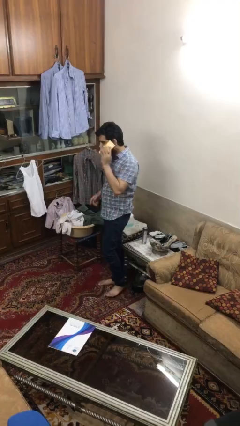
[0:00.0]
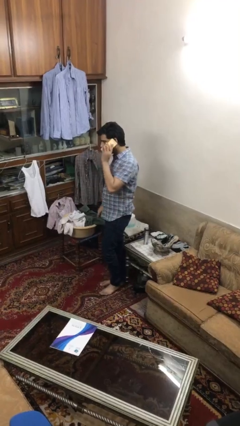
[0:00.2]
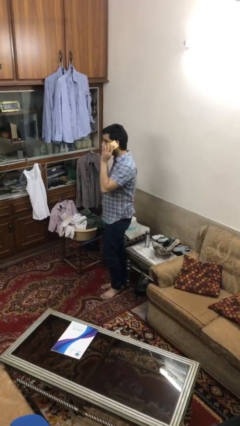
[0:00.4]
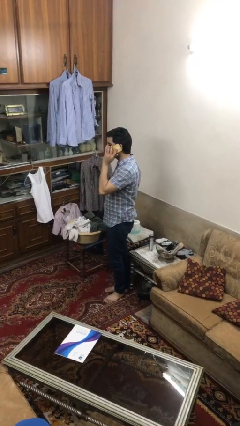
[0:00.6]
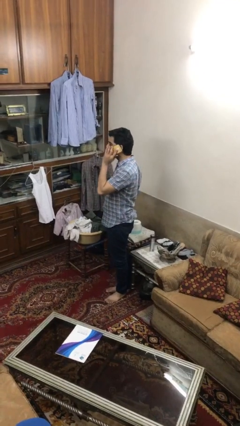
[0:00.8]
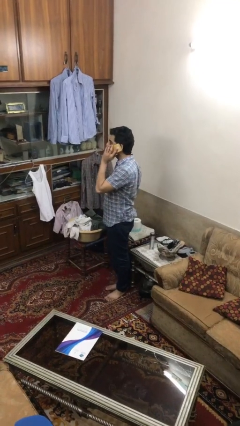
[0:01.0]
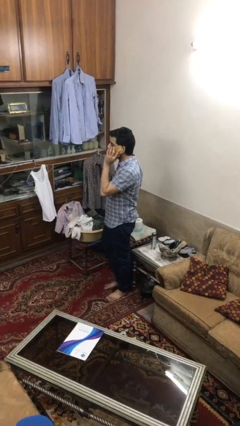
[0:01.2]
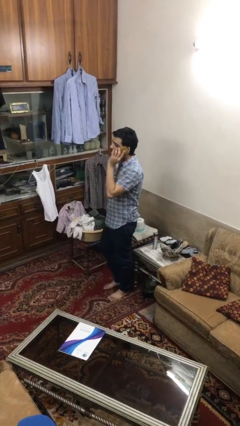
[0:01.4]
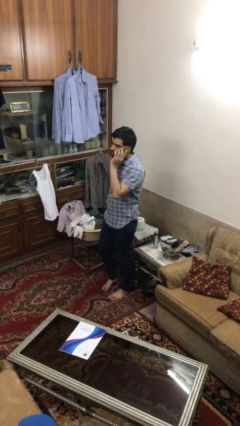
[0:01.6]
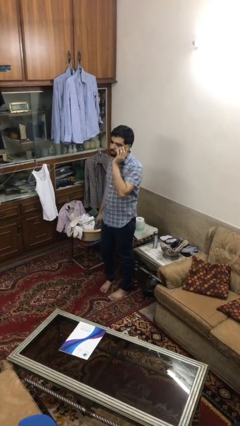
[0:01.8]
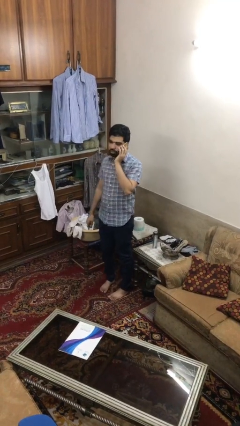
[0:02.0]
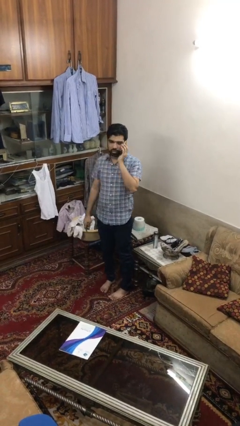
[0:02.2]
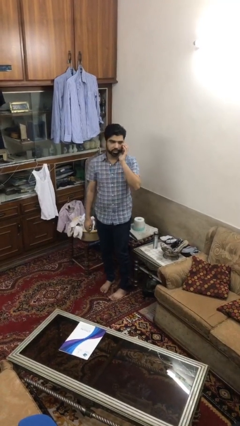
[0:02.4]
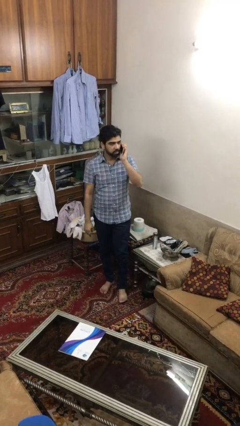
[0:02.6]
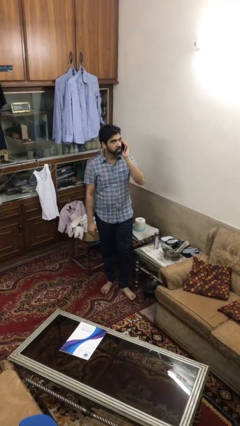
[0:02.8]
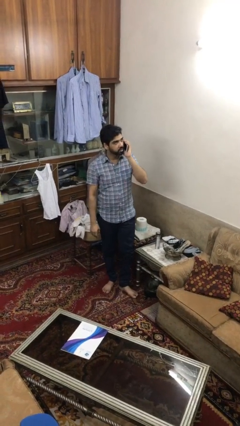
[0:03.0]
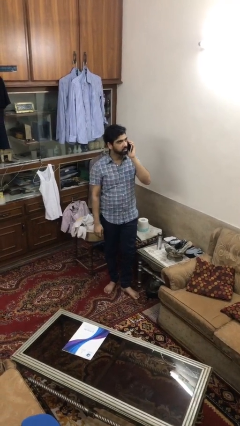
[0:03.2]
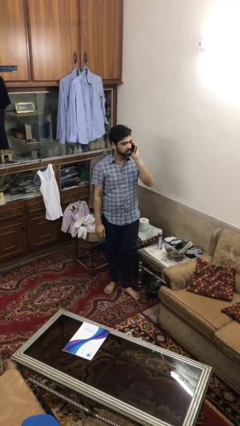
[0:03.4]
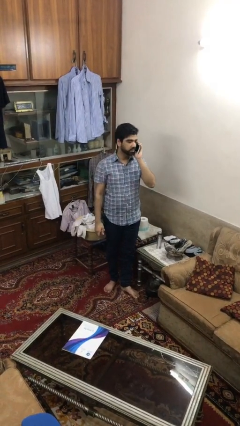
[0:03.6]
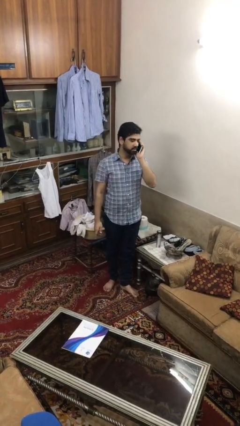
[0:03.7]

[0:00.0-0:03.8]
person talks on phone

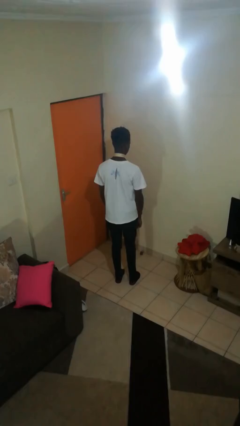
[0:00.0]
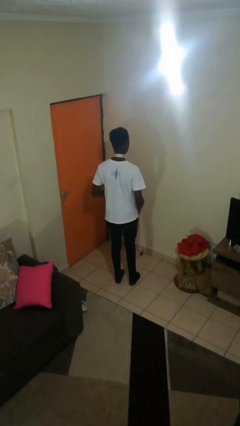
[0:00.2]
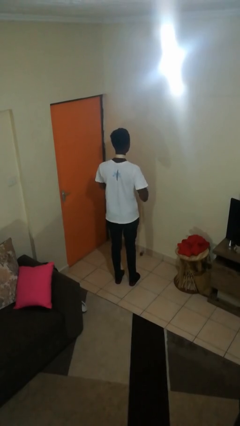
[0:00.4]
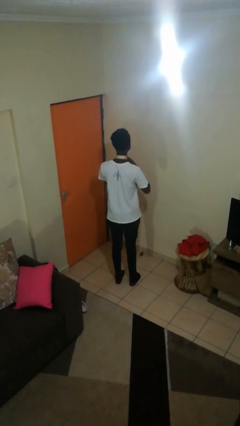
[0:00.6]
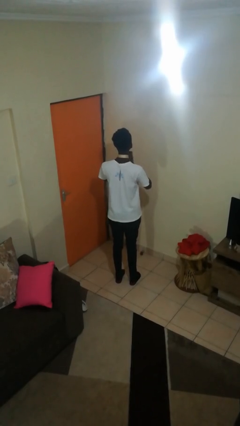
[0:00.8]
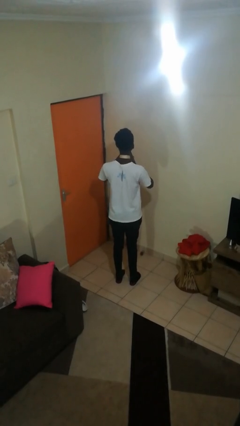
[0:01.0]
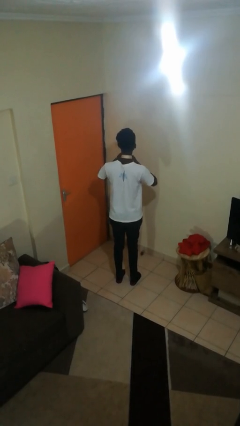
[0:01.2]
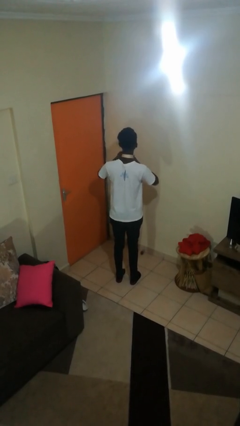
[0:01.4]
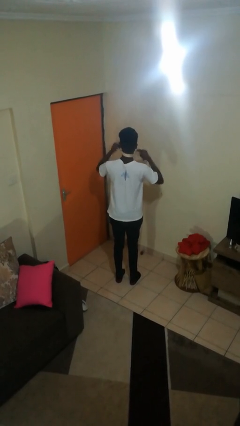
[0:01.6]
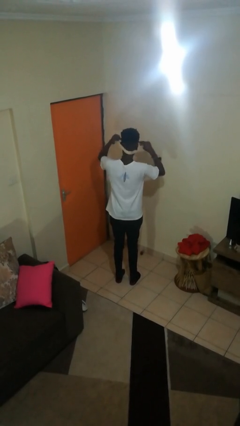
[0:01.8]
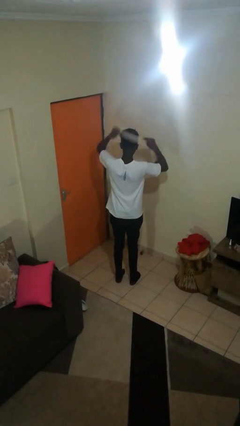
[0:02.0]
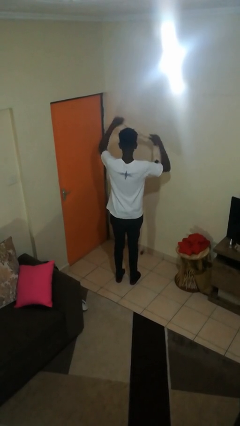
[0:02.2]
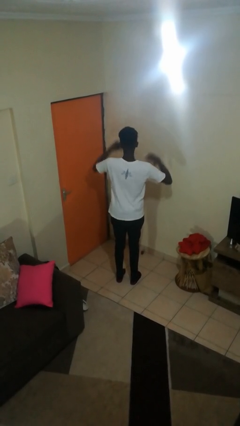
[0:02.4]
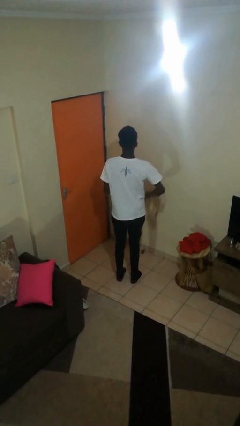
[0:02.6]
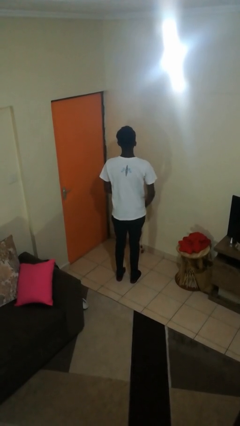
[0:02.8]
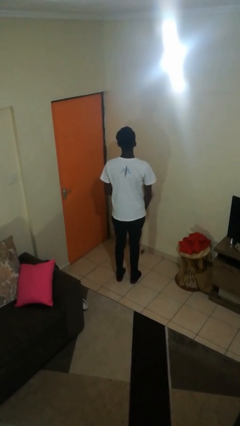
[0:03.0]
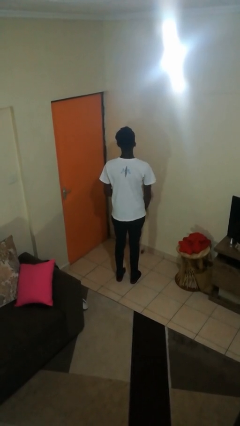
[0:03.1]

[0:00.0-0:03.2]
person takes off necktie

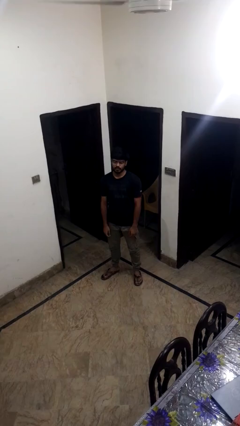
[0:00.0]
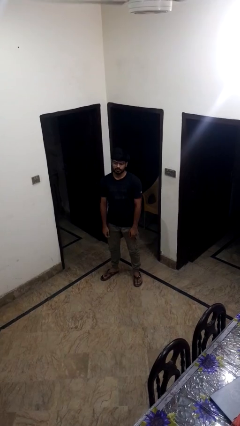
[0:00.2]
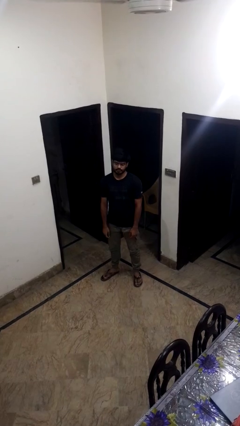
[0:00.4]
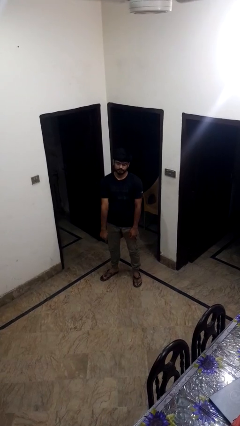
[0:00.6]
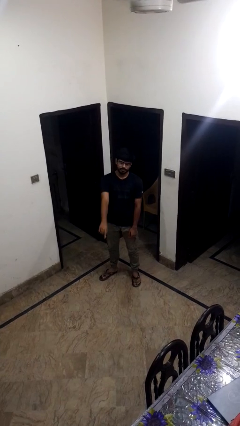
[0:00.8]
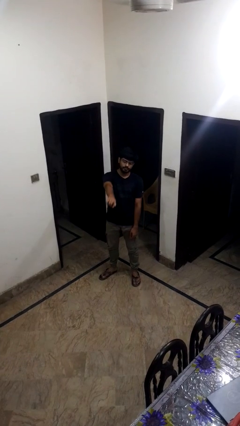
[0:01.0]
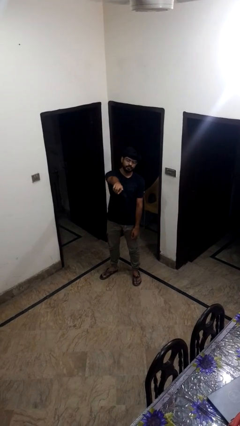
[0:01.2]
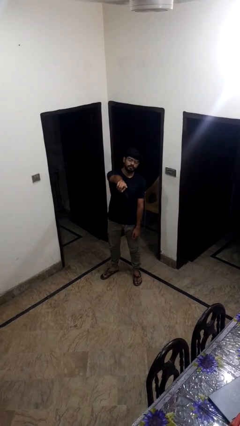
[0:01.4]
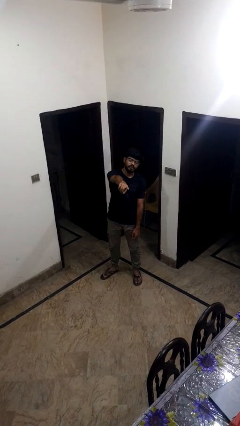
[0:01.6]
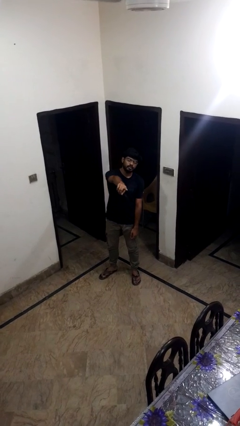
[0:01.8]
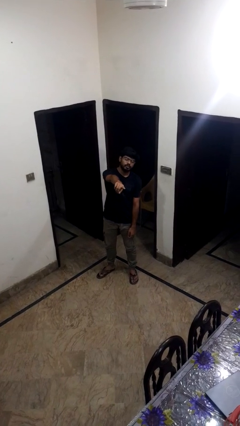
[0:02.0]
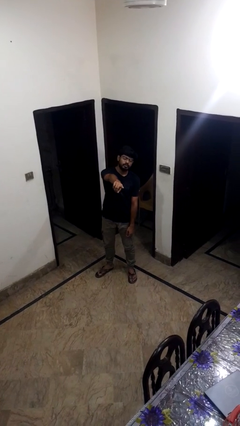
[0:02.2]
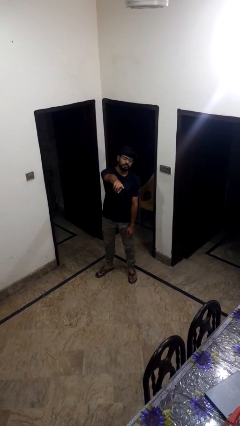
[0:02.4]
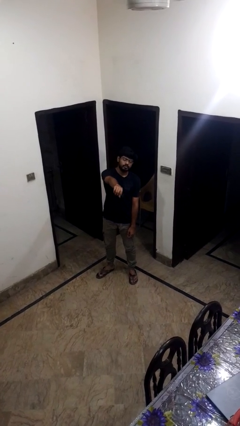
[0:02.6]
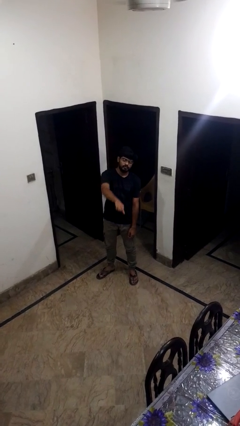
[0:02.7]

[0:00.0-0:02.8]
person points at person

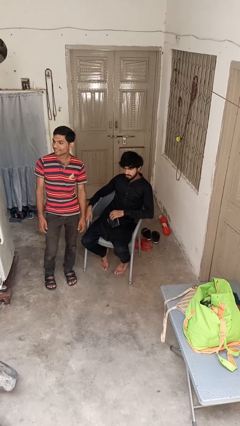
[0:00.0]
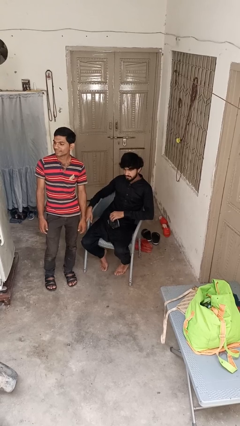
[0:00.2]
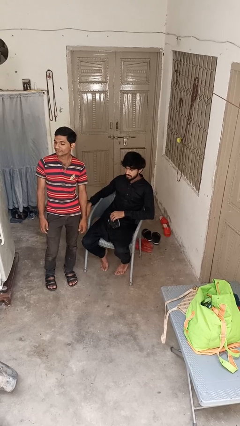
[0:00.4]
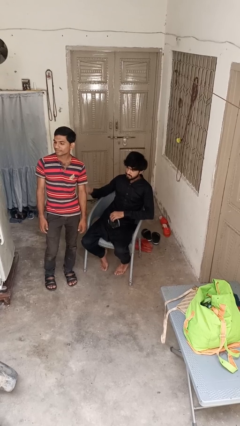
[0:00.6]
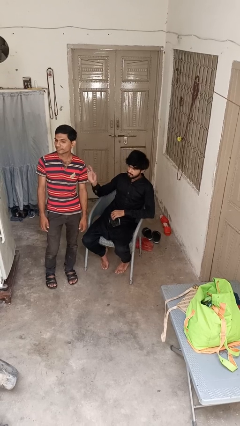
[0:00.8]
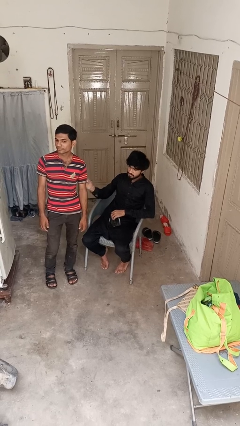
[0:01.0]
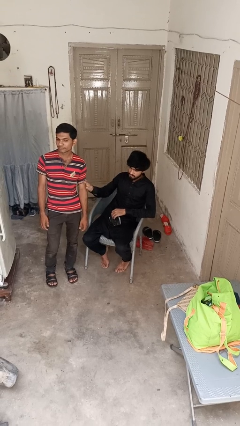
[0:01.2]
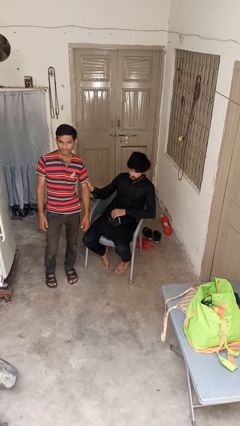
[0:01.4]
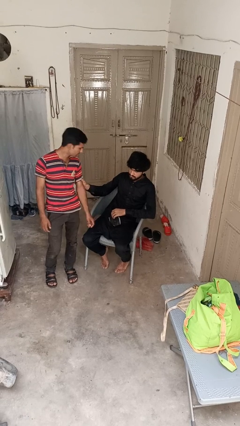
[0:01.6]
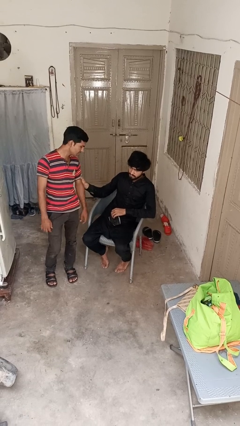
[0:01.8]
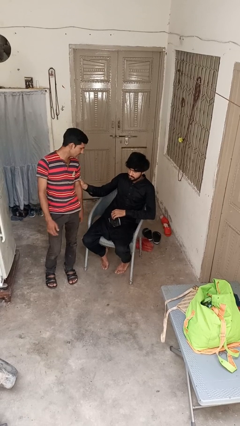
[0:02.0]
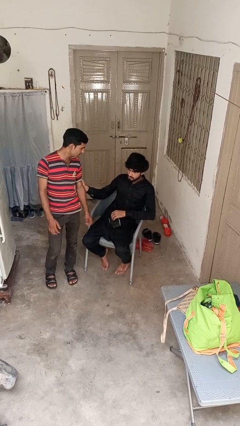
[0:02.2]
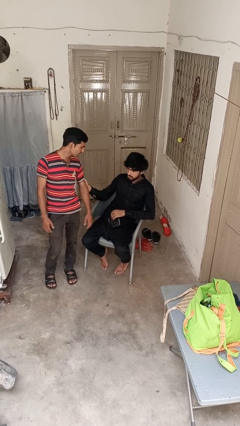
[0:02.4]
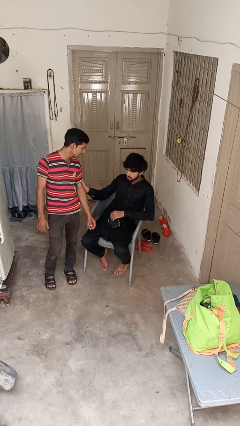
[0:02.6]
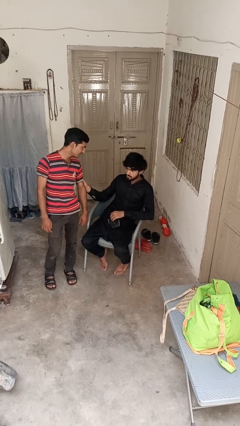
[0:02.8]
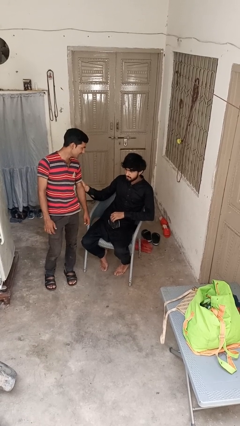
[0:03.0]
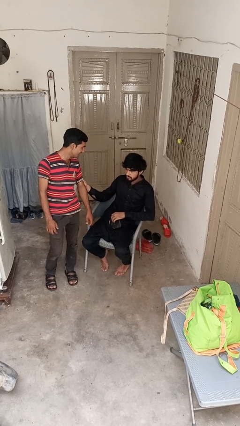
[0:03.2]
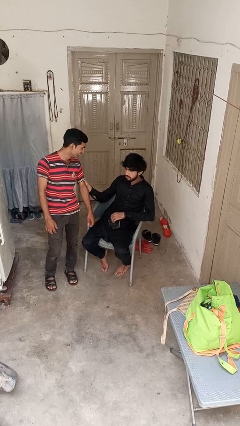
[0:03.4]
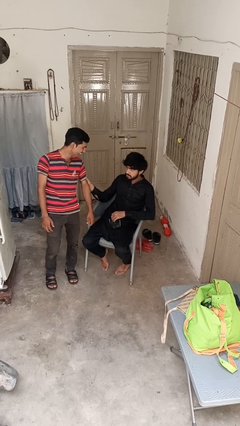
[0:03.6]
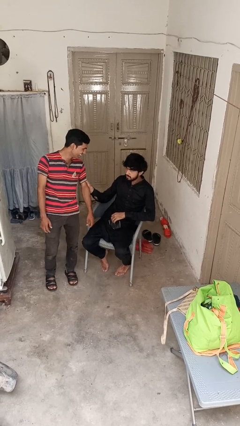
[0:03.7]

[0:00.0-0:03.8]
person grabs person by bicep

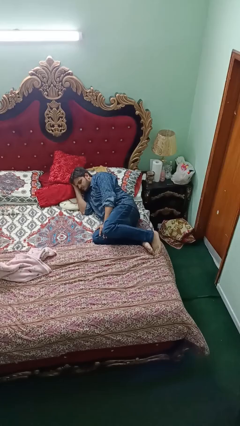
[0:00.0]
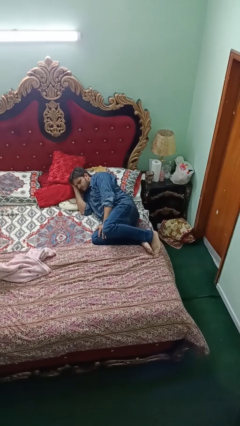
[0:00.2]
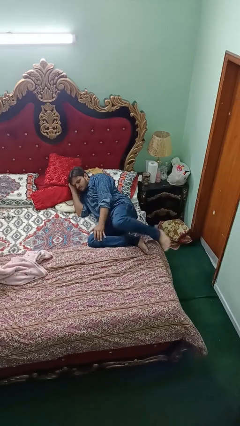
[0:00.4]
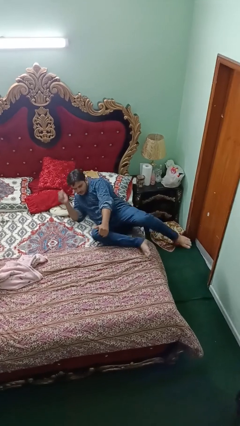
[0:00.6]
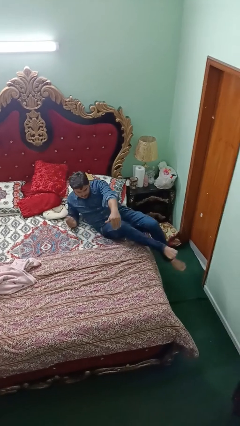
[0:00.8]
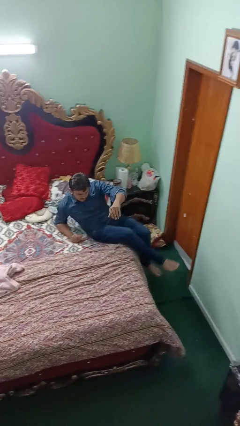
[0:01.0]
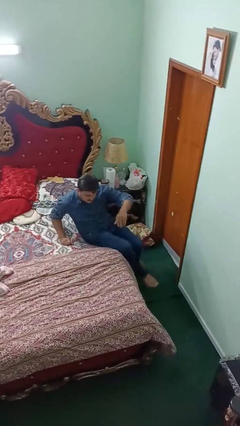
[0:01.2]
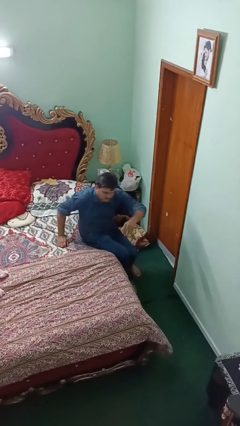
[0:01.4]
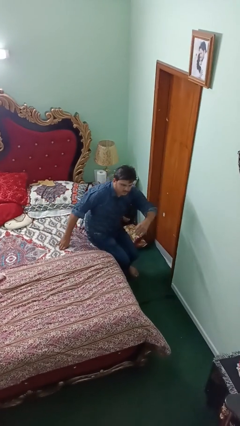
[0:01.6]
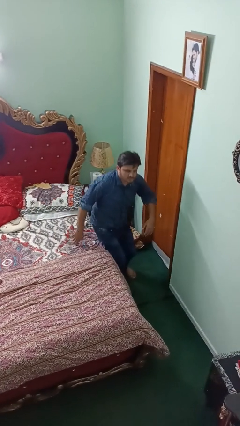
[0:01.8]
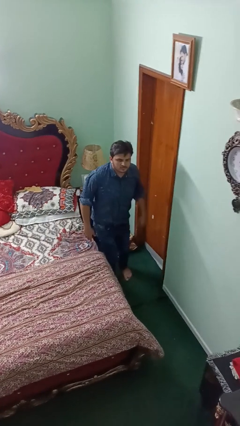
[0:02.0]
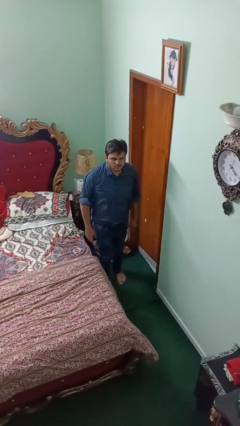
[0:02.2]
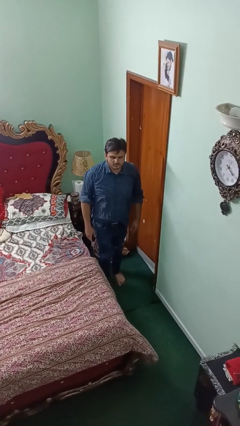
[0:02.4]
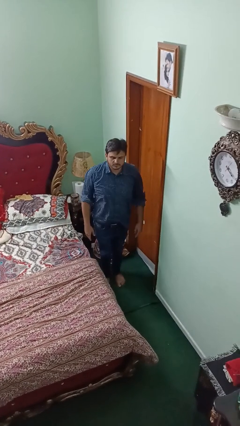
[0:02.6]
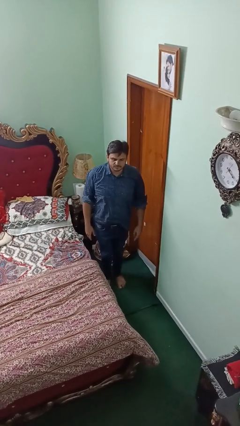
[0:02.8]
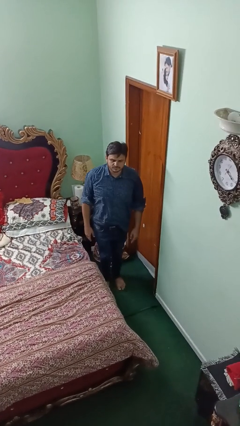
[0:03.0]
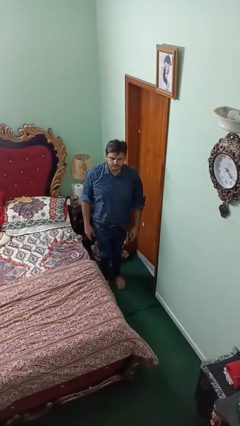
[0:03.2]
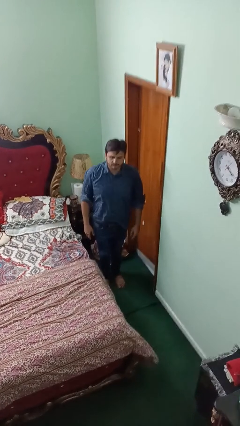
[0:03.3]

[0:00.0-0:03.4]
person stands up
